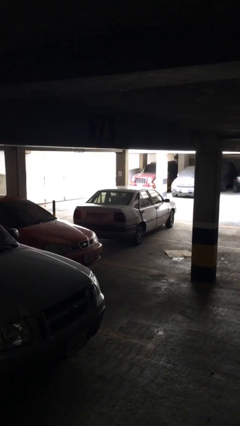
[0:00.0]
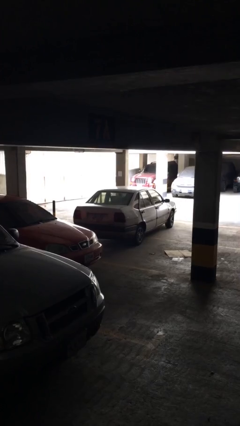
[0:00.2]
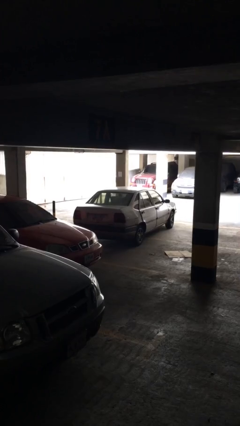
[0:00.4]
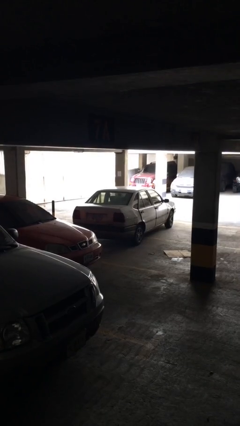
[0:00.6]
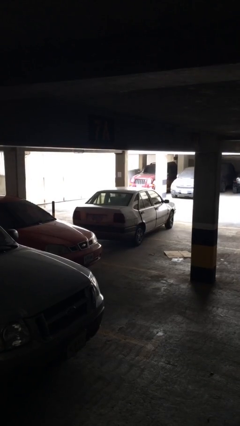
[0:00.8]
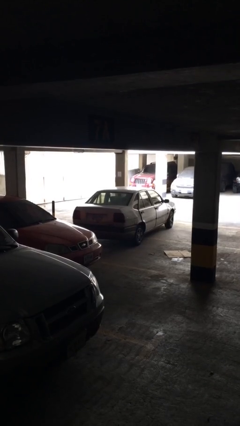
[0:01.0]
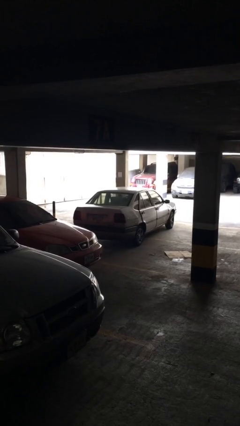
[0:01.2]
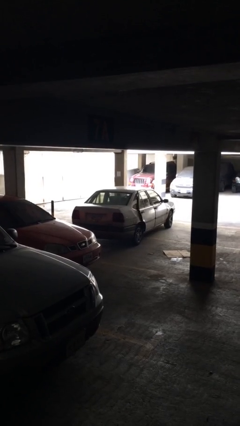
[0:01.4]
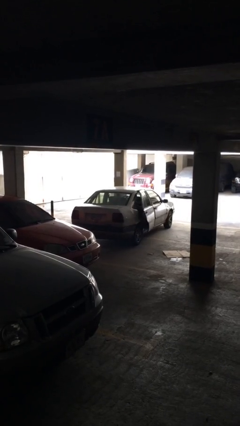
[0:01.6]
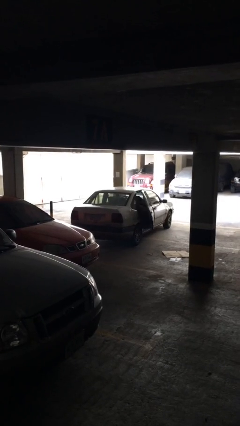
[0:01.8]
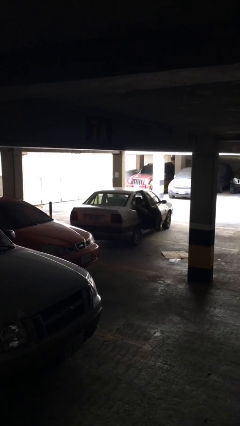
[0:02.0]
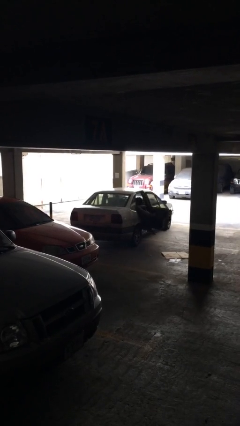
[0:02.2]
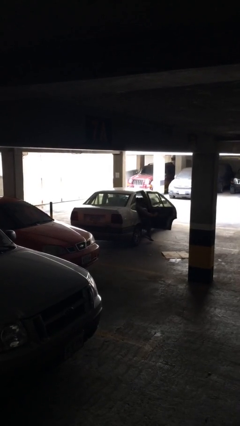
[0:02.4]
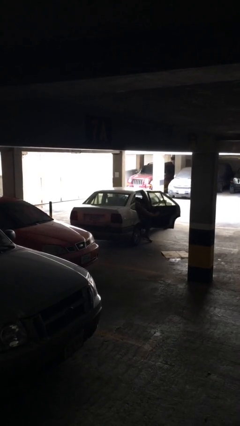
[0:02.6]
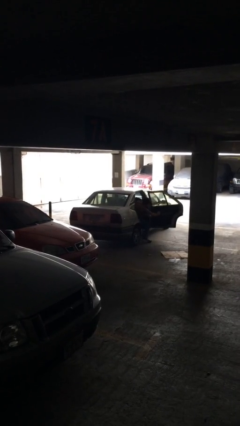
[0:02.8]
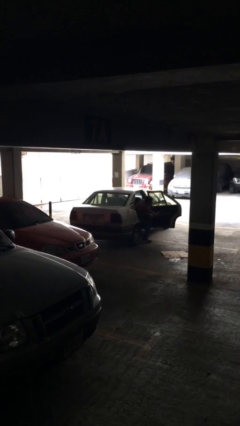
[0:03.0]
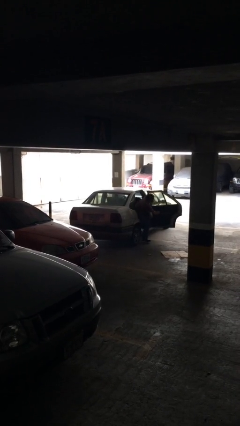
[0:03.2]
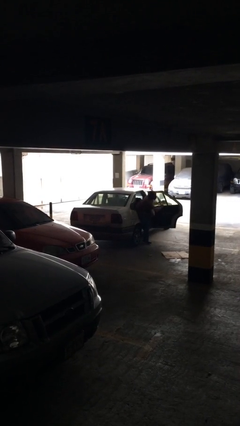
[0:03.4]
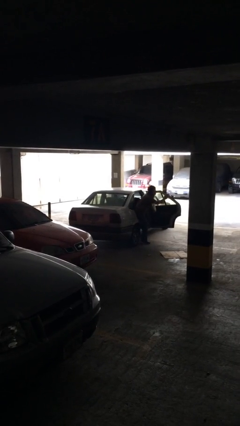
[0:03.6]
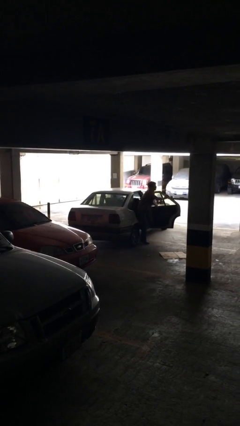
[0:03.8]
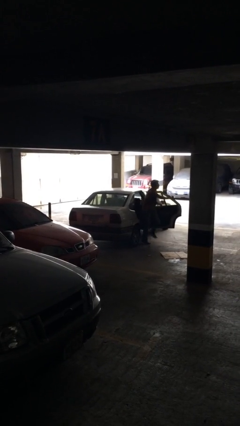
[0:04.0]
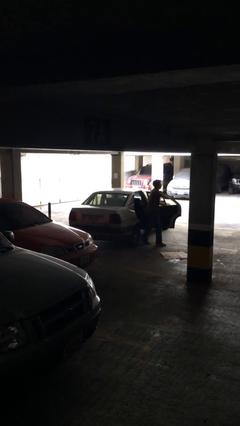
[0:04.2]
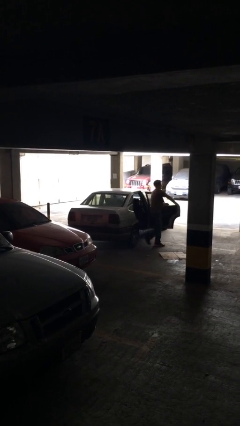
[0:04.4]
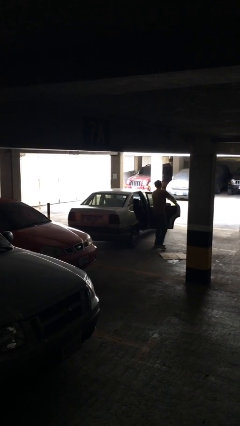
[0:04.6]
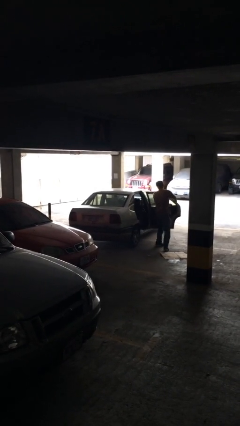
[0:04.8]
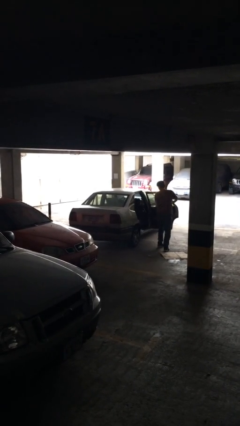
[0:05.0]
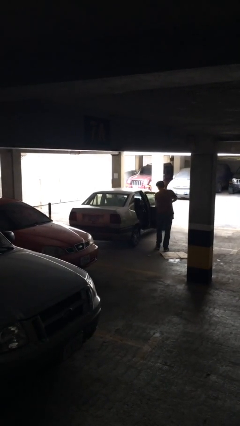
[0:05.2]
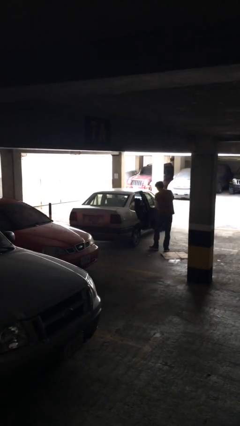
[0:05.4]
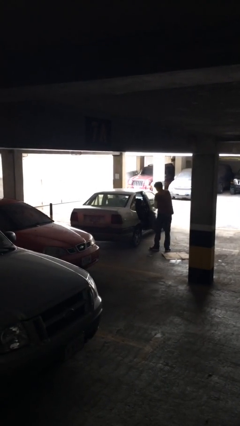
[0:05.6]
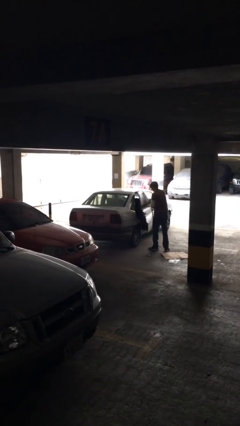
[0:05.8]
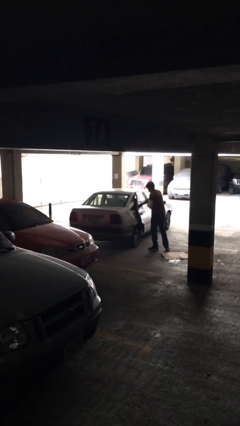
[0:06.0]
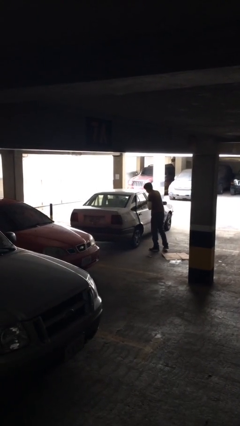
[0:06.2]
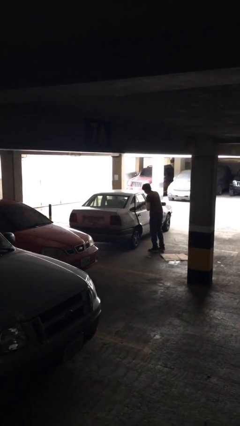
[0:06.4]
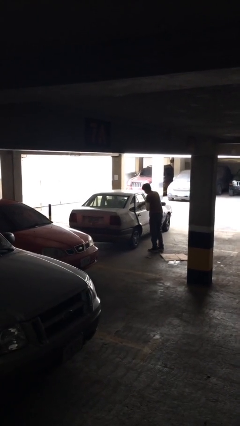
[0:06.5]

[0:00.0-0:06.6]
car drops off person

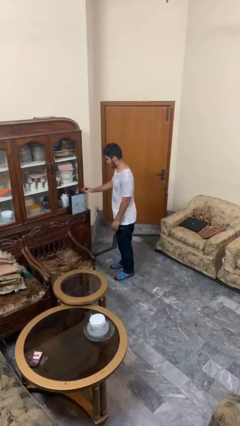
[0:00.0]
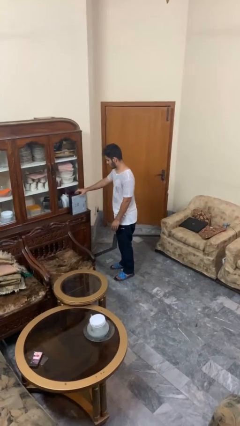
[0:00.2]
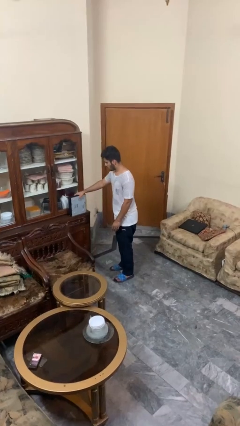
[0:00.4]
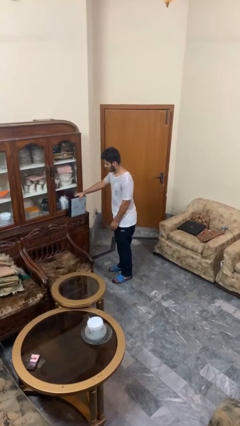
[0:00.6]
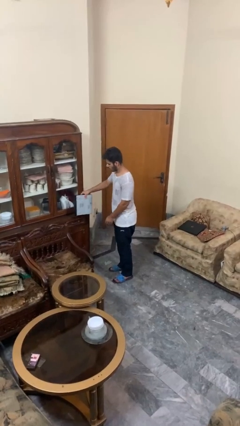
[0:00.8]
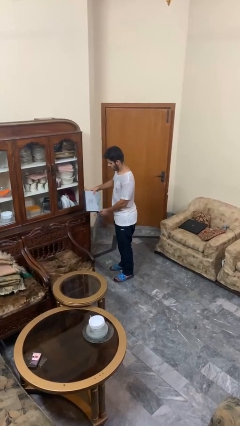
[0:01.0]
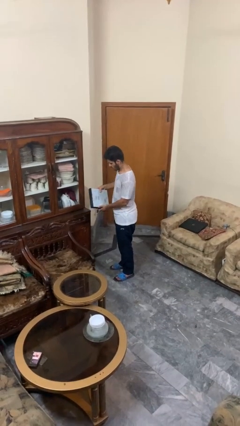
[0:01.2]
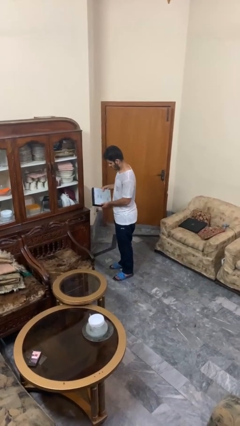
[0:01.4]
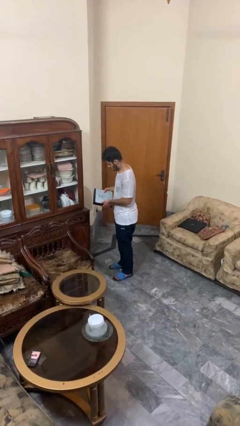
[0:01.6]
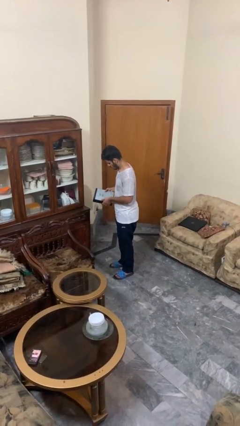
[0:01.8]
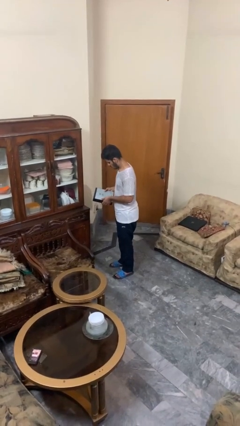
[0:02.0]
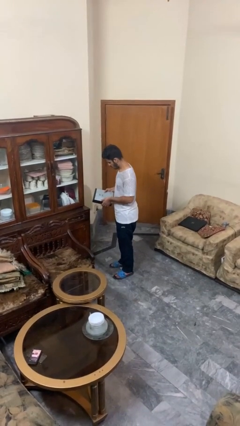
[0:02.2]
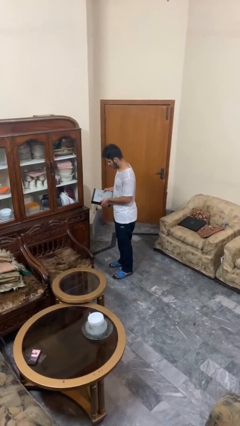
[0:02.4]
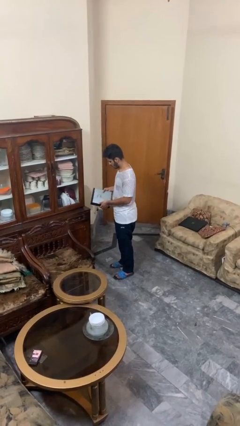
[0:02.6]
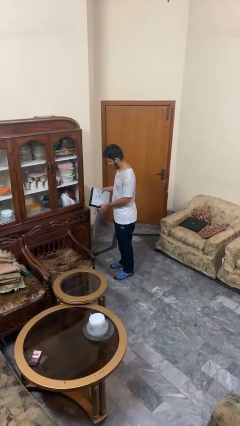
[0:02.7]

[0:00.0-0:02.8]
person picks up object from countertop

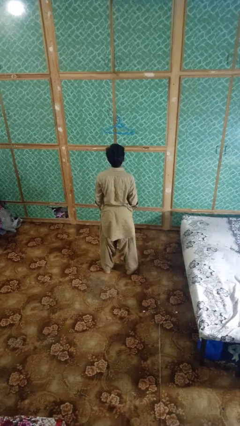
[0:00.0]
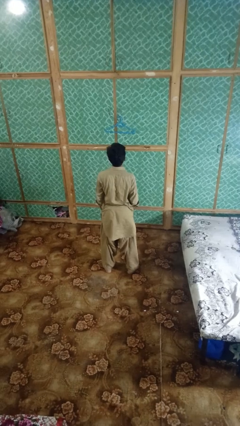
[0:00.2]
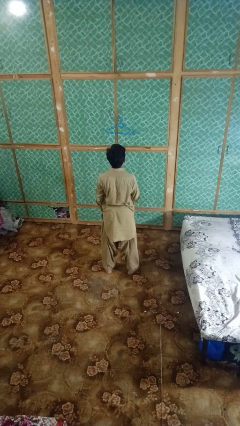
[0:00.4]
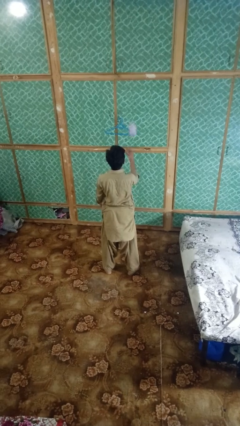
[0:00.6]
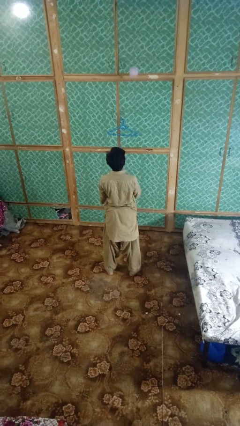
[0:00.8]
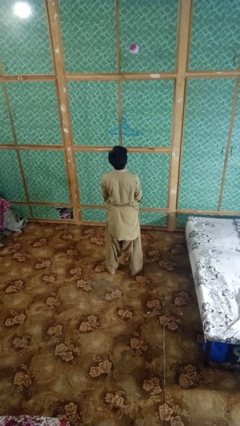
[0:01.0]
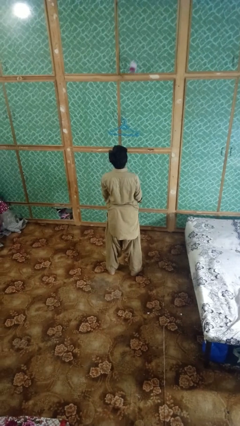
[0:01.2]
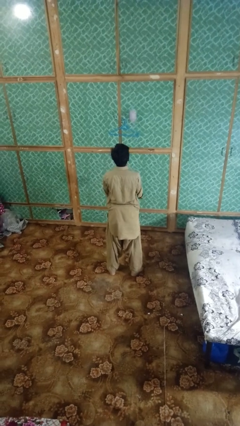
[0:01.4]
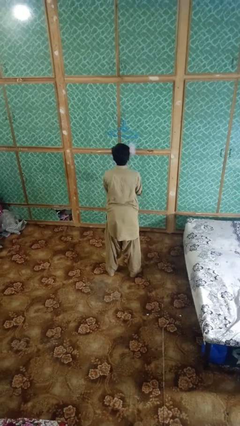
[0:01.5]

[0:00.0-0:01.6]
person drops object

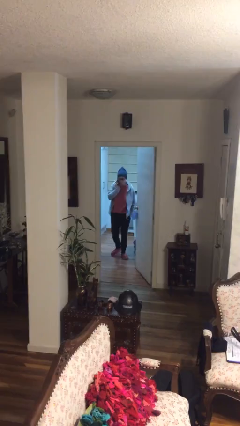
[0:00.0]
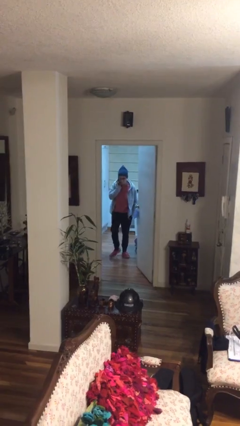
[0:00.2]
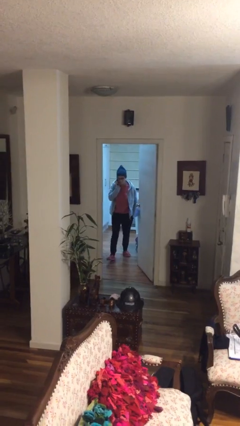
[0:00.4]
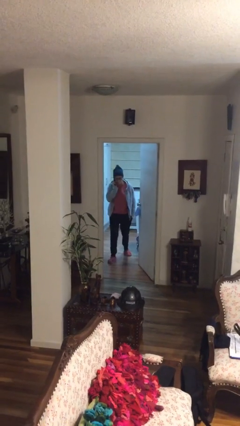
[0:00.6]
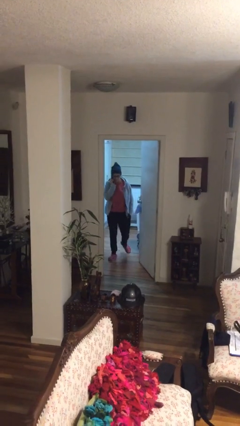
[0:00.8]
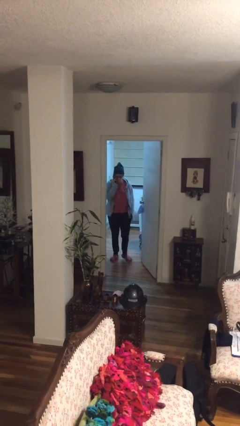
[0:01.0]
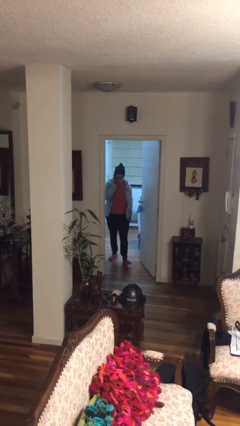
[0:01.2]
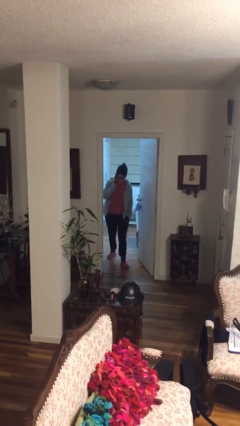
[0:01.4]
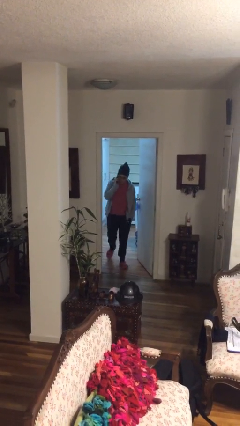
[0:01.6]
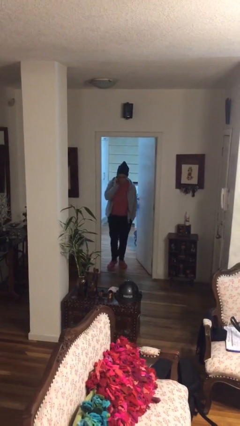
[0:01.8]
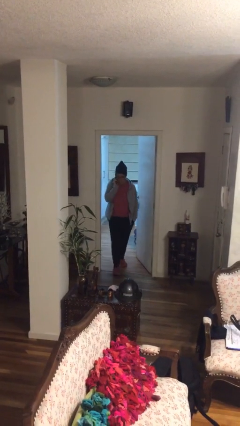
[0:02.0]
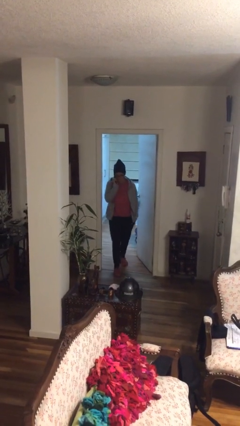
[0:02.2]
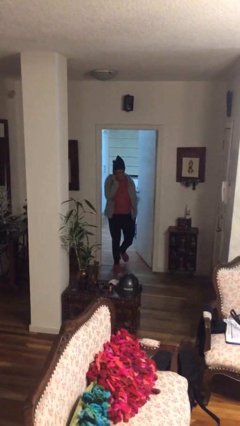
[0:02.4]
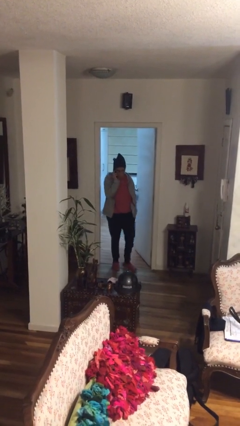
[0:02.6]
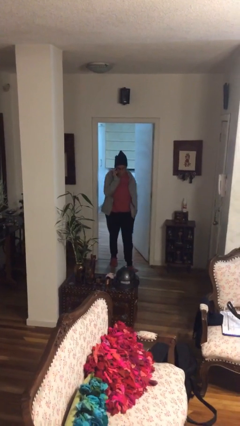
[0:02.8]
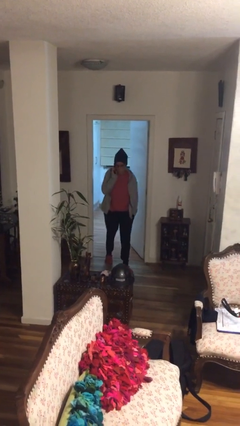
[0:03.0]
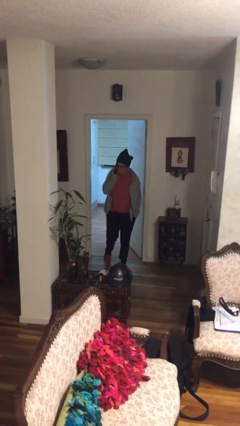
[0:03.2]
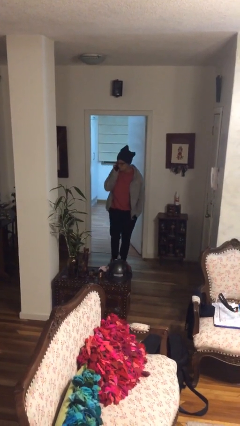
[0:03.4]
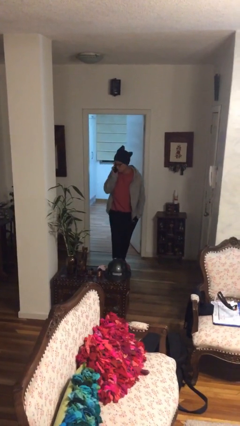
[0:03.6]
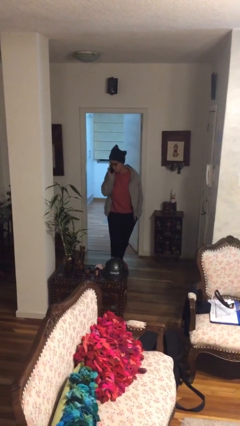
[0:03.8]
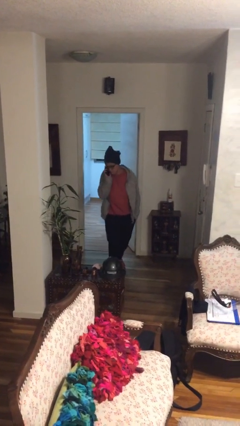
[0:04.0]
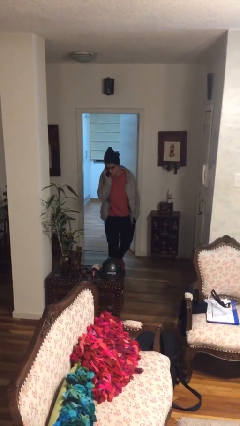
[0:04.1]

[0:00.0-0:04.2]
person enters scene through structure

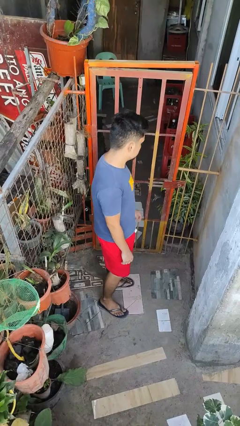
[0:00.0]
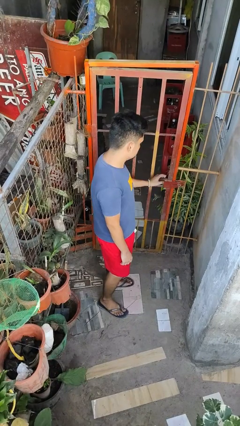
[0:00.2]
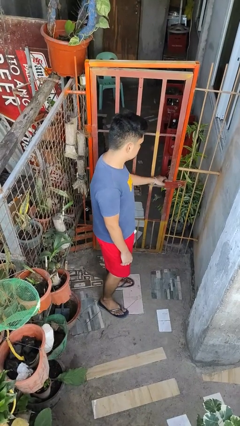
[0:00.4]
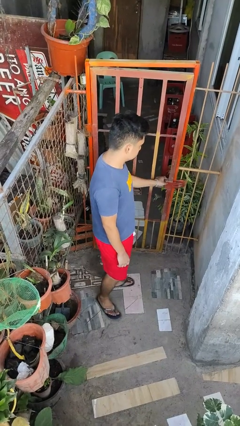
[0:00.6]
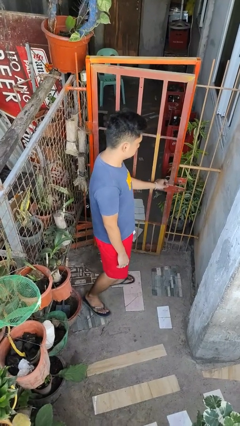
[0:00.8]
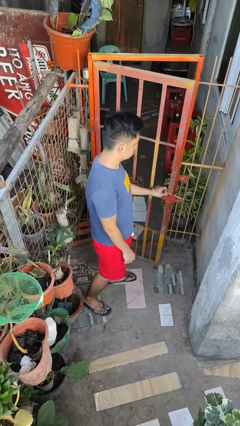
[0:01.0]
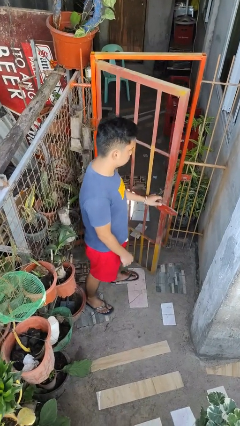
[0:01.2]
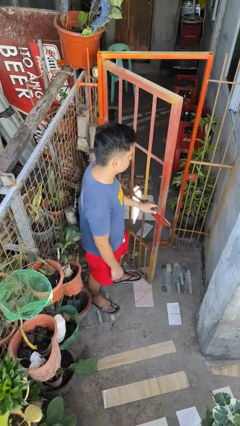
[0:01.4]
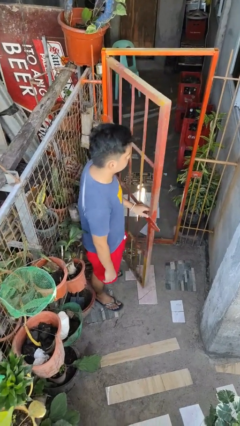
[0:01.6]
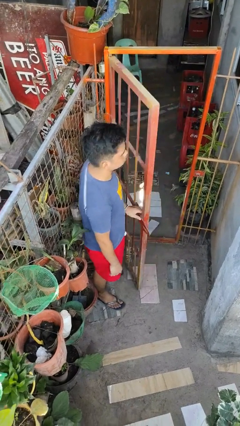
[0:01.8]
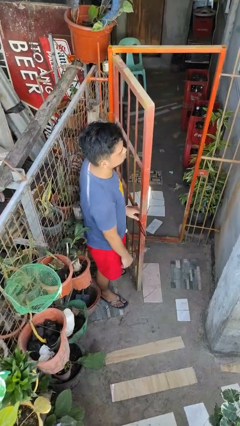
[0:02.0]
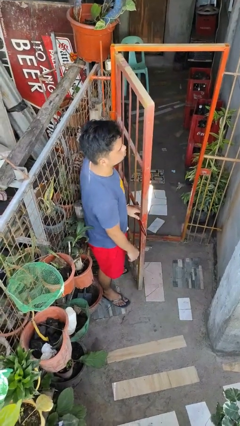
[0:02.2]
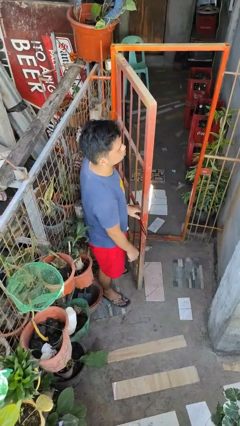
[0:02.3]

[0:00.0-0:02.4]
person opens gate
